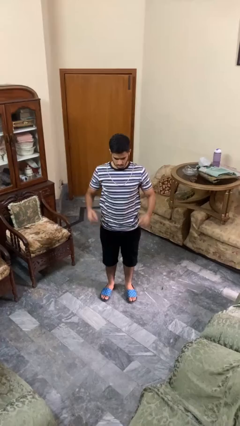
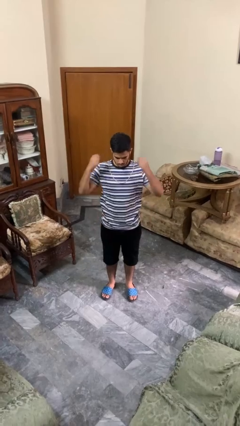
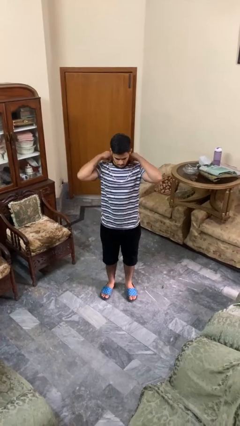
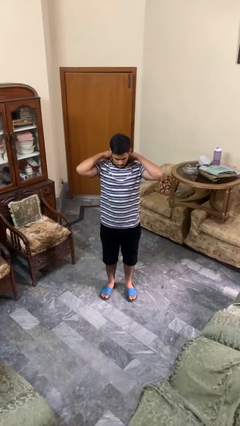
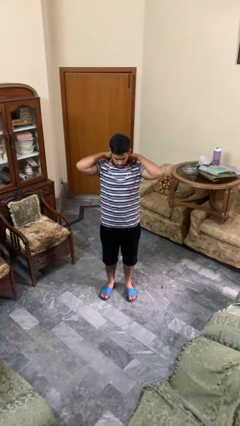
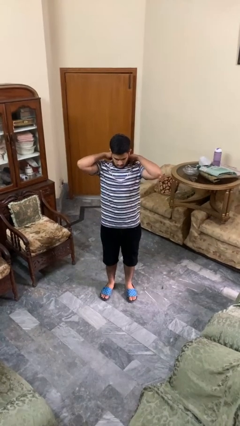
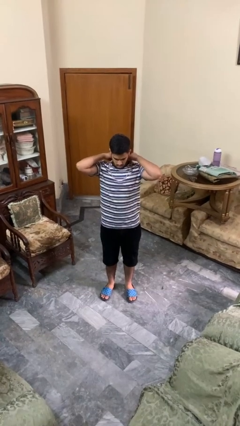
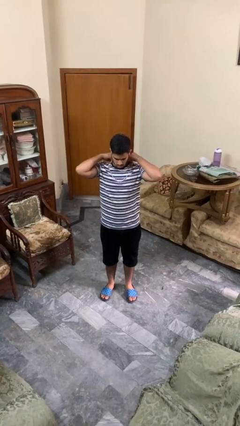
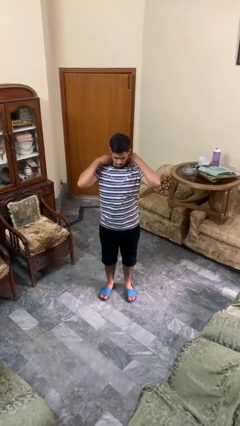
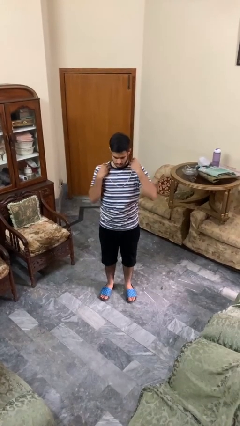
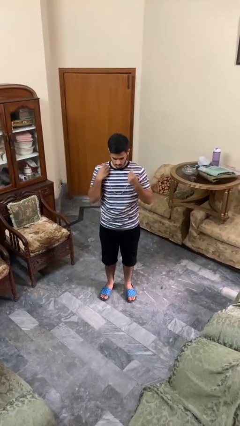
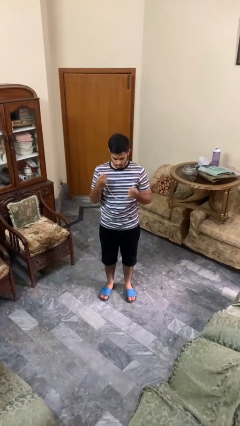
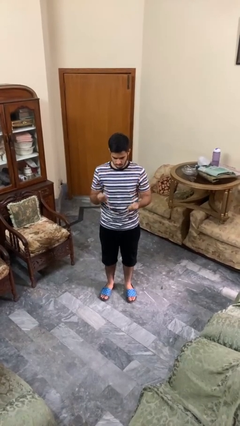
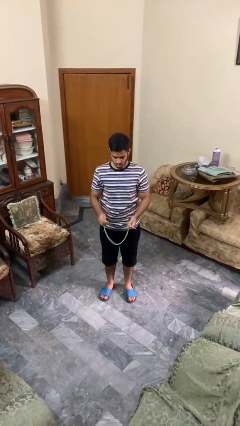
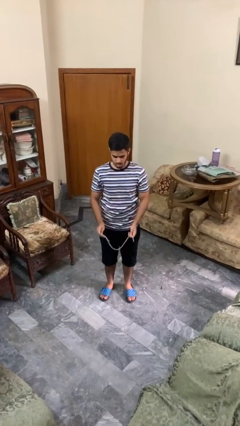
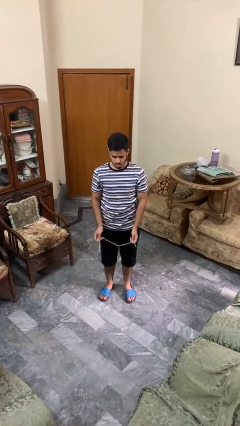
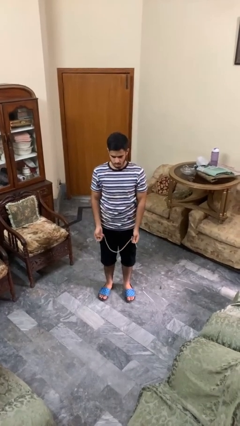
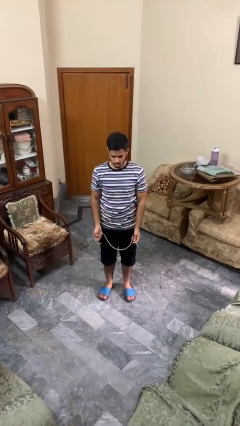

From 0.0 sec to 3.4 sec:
person takes off necklace

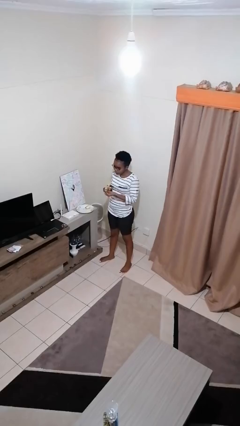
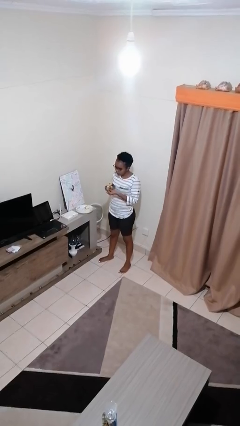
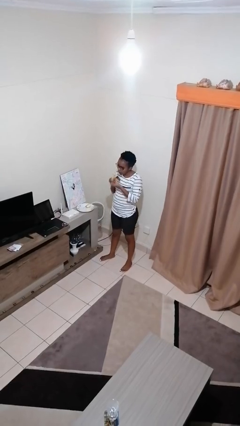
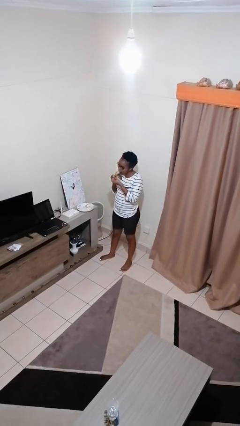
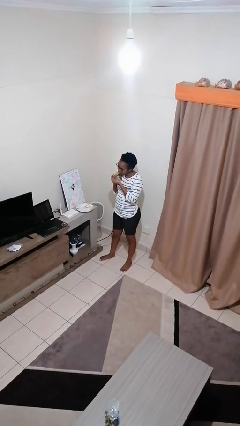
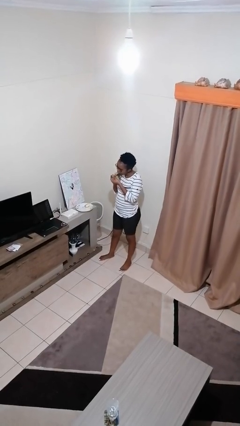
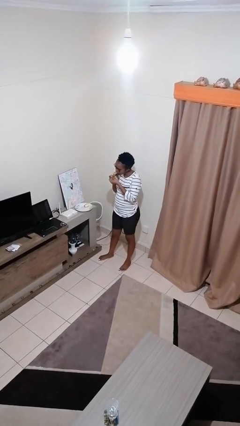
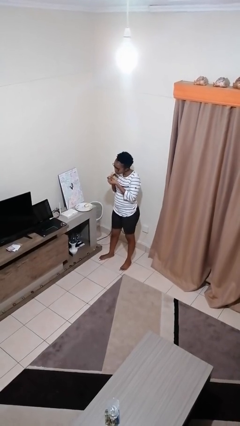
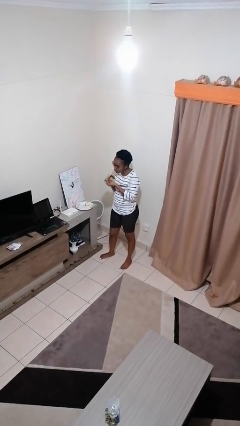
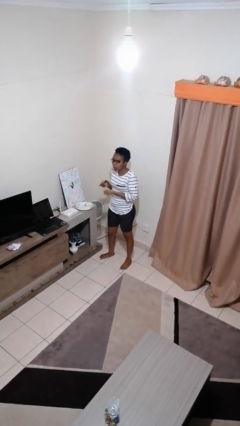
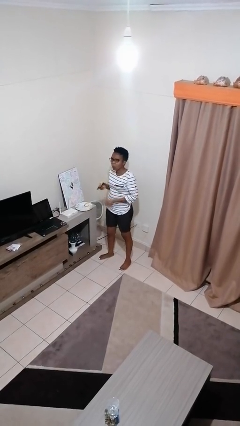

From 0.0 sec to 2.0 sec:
person eats banana

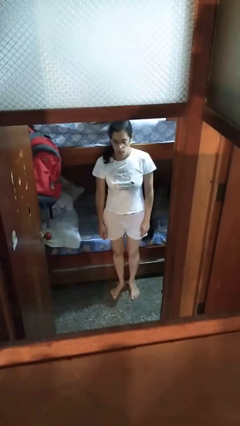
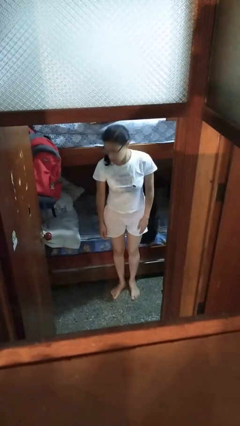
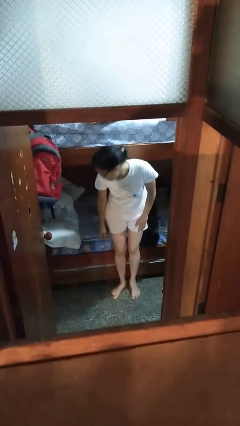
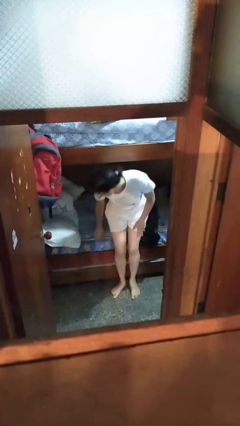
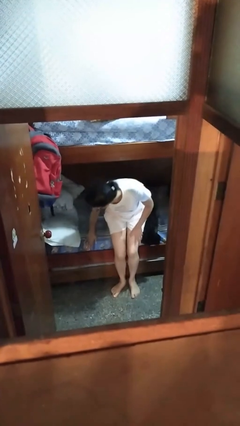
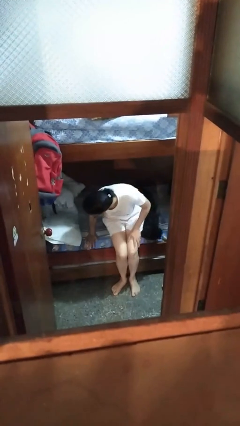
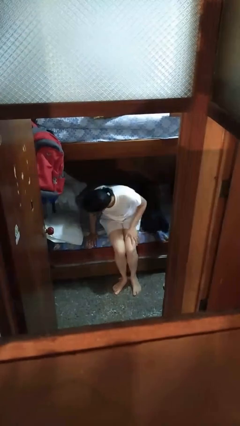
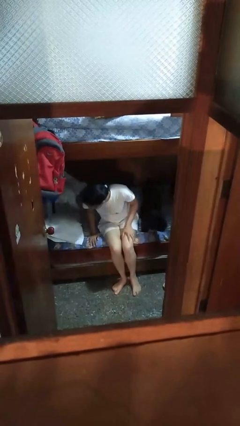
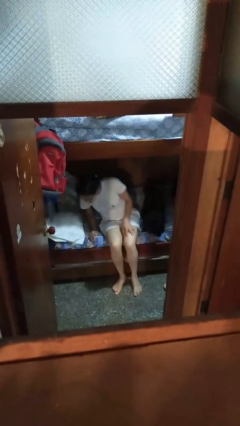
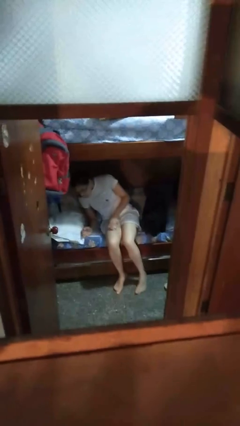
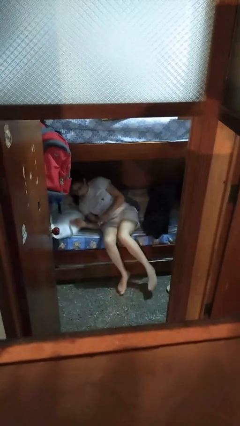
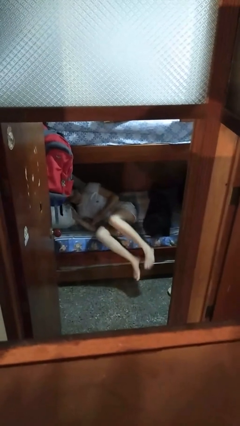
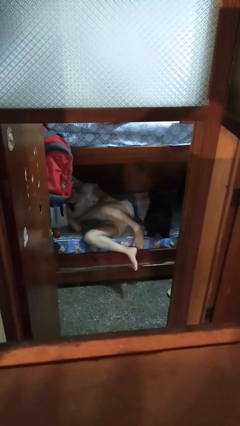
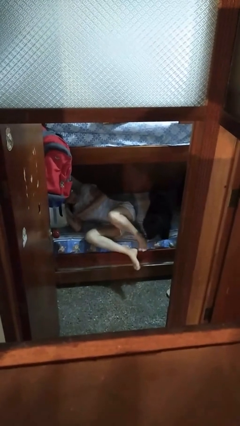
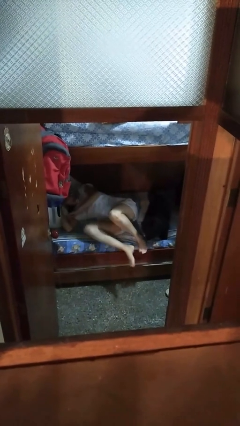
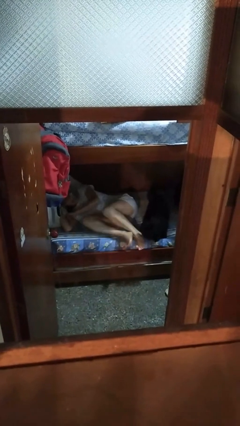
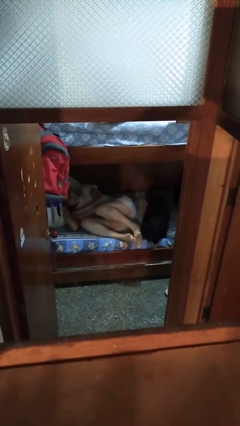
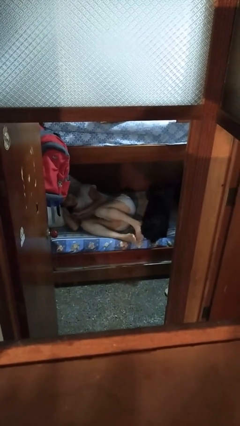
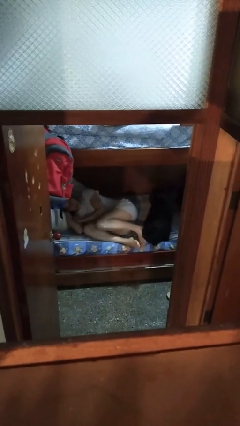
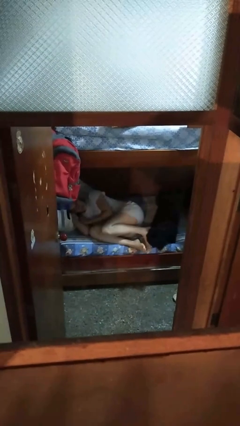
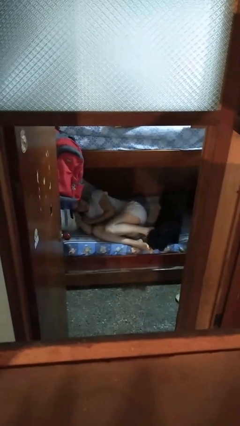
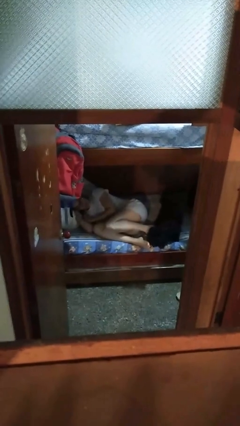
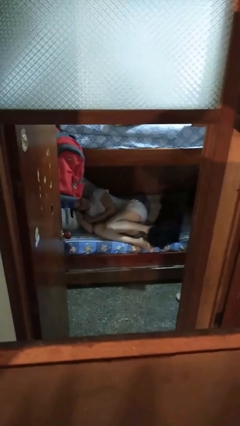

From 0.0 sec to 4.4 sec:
person lies down on bed

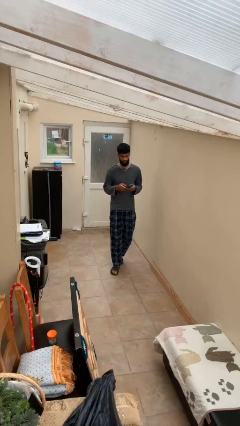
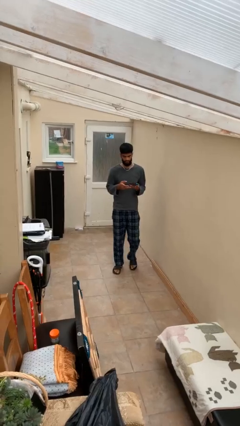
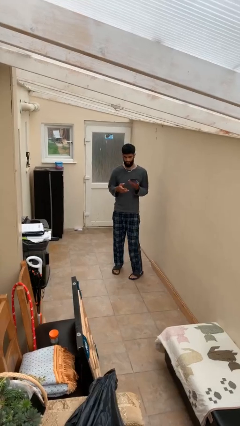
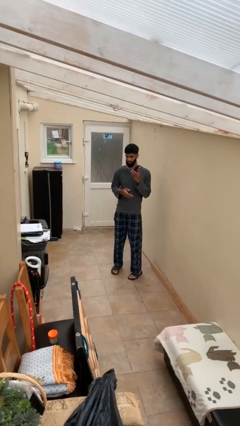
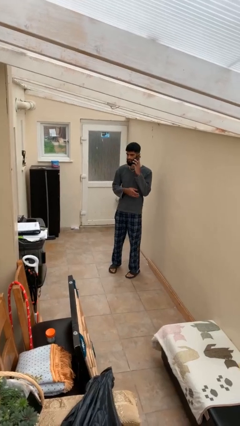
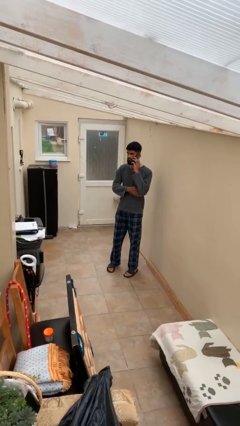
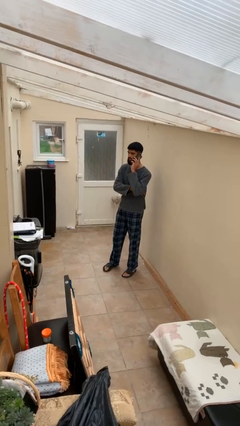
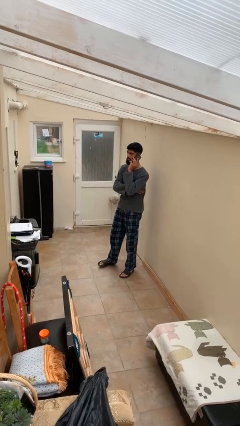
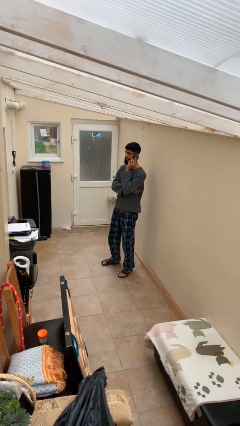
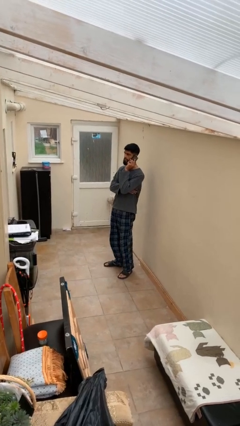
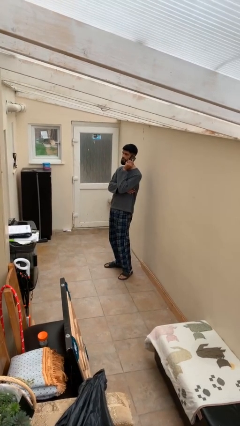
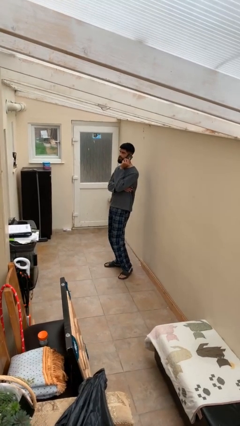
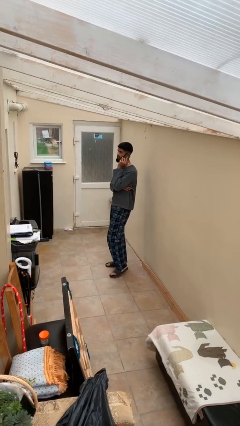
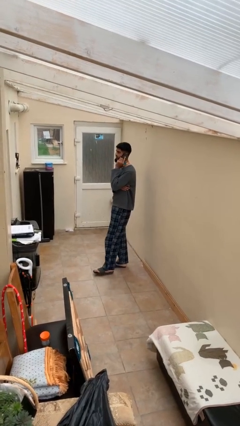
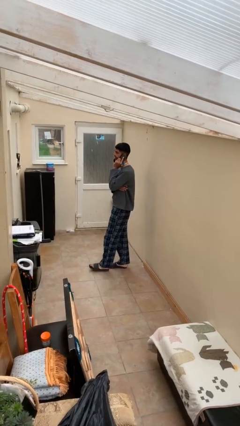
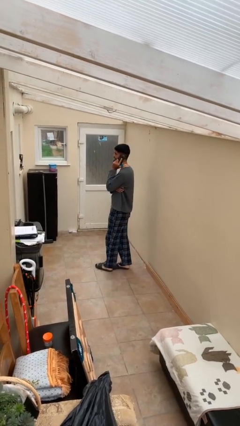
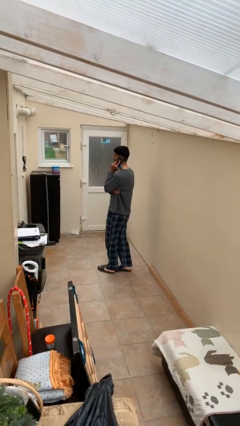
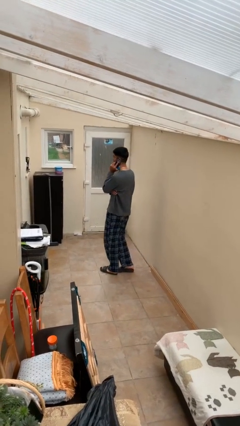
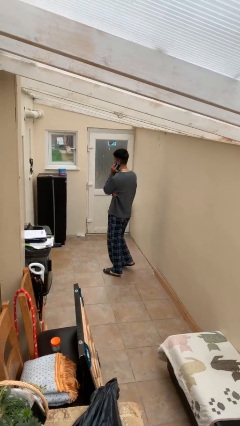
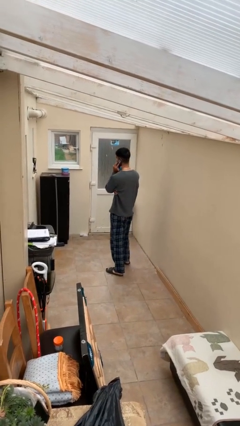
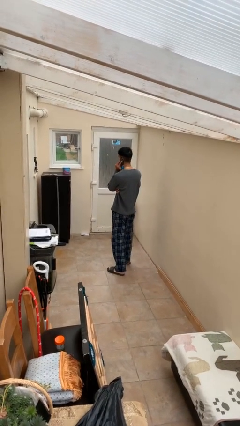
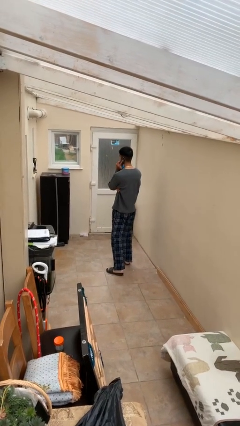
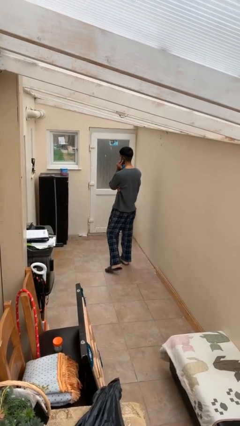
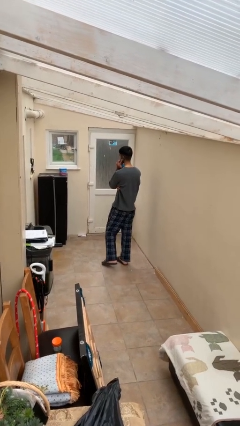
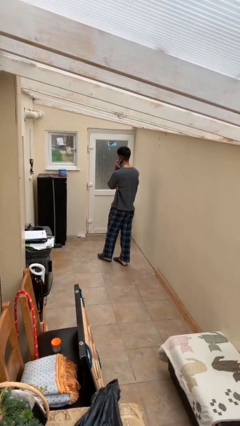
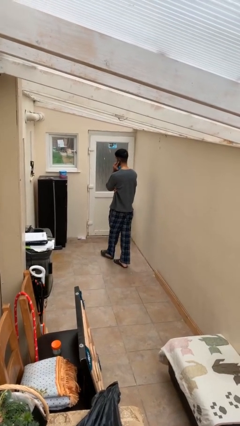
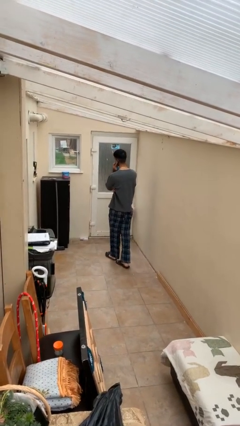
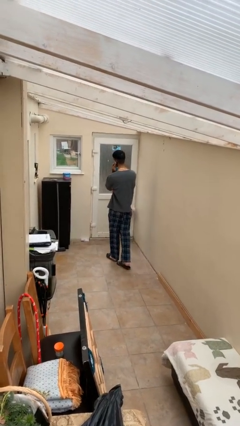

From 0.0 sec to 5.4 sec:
person talks on phone

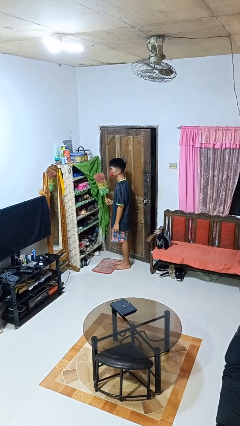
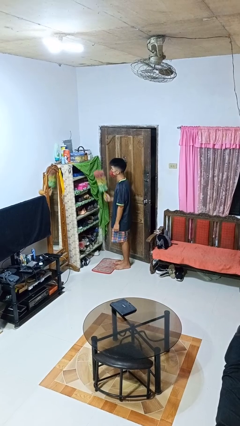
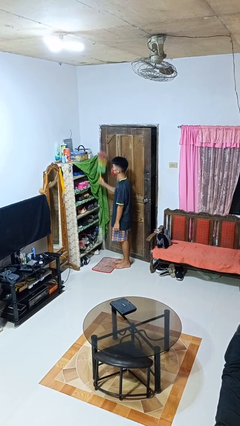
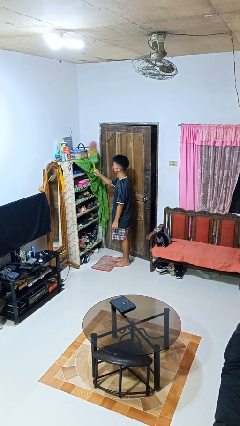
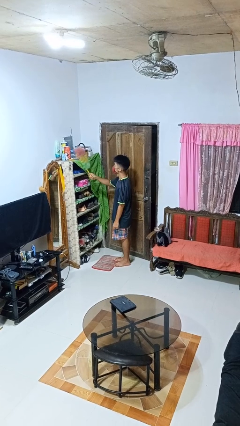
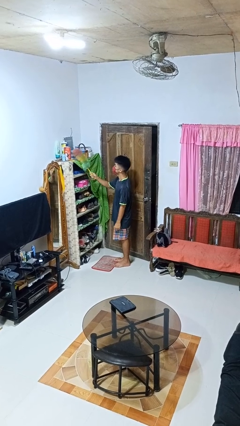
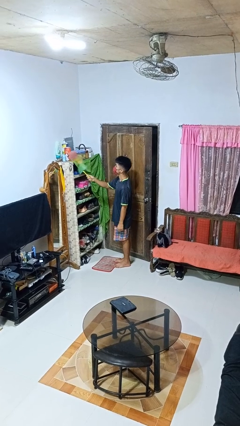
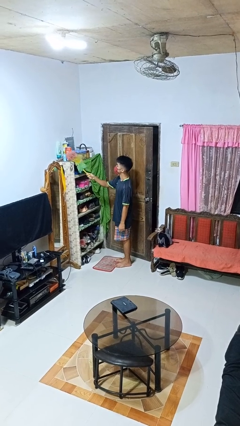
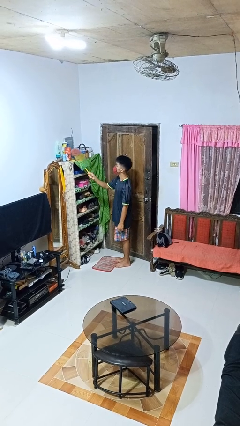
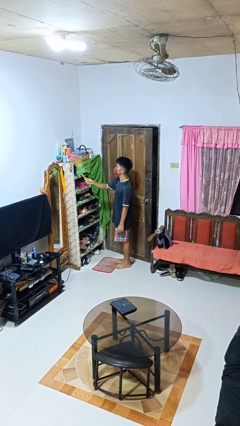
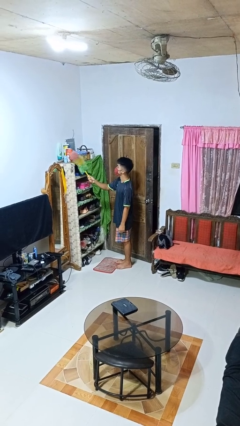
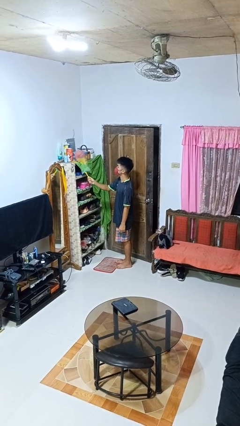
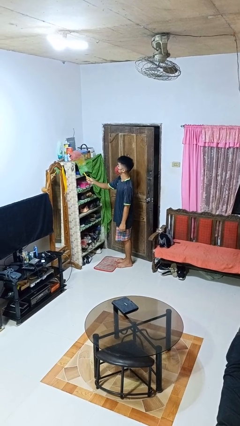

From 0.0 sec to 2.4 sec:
person dusts furniture
